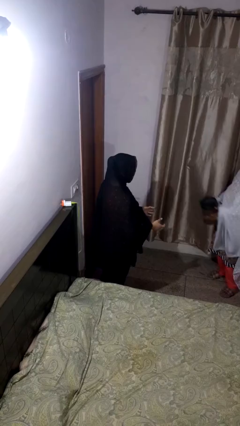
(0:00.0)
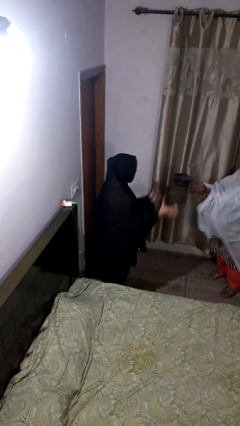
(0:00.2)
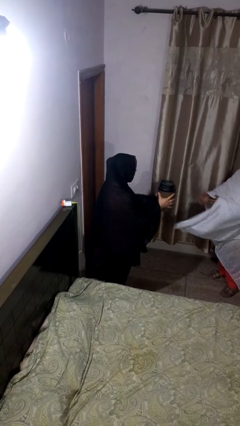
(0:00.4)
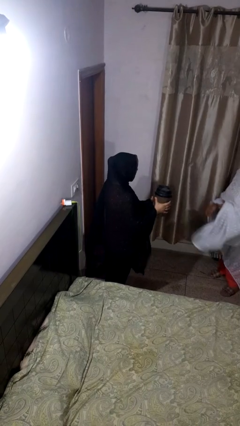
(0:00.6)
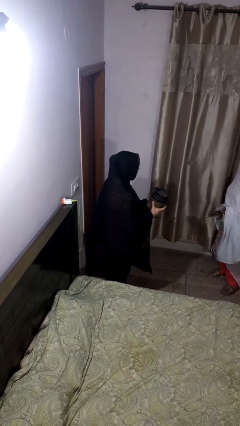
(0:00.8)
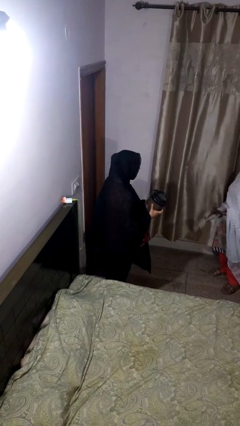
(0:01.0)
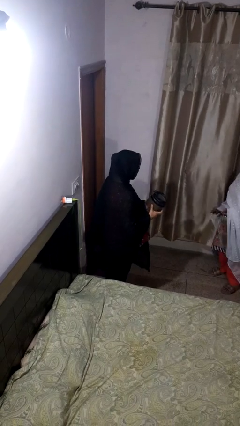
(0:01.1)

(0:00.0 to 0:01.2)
person catches object from person

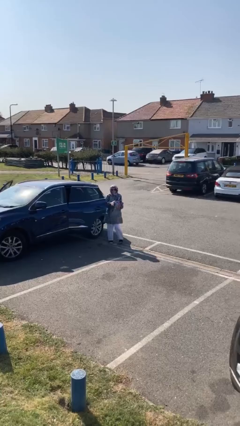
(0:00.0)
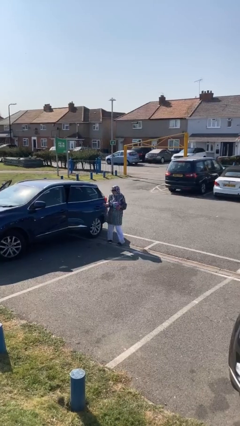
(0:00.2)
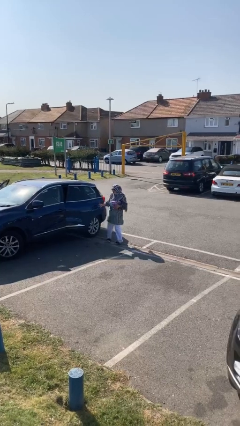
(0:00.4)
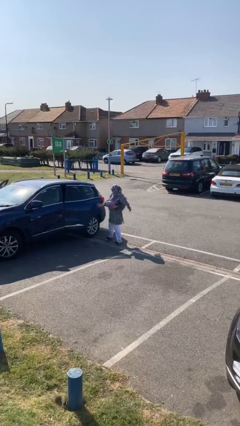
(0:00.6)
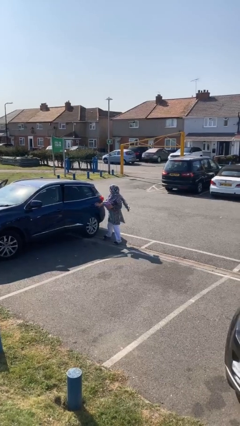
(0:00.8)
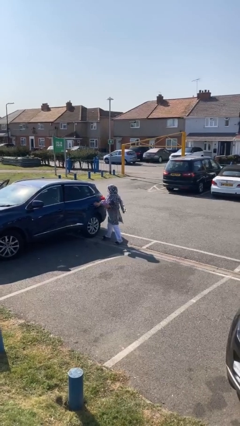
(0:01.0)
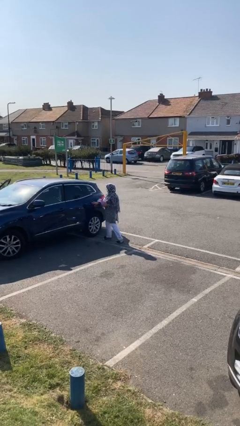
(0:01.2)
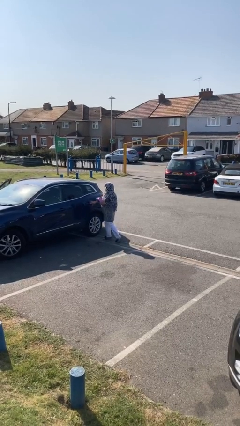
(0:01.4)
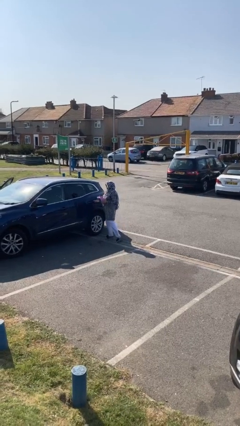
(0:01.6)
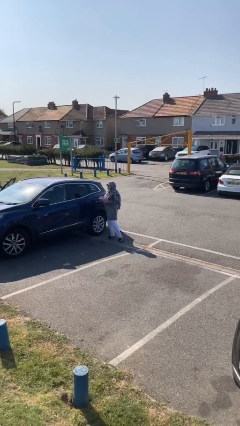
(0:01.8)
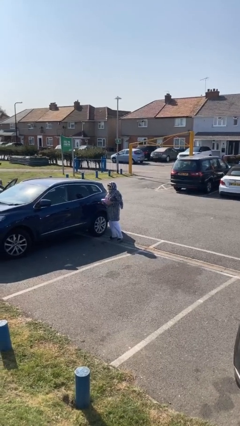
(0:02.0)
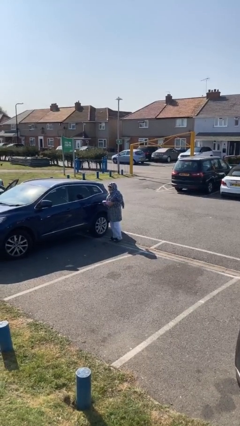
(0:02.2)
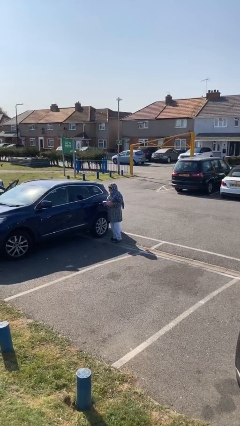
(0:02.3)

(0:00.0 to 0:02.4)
person closes car door

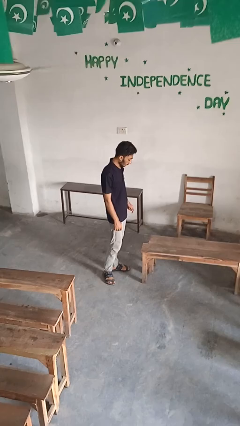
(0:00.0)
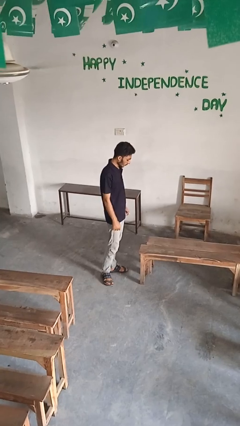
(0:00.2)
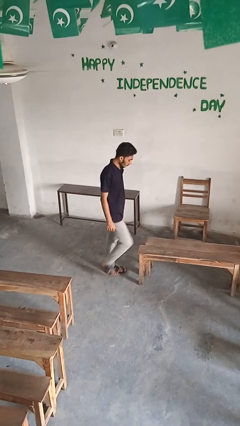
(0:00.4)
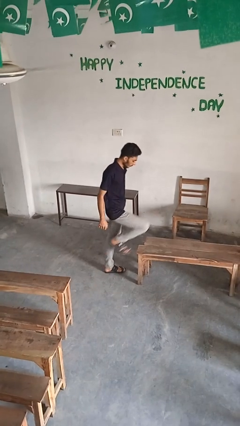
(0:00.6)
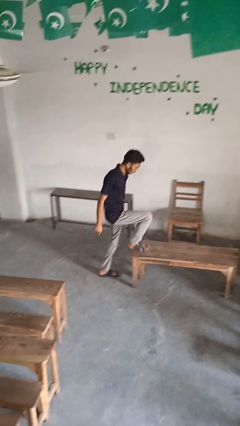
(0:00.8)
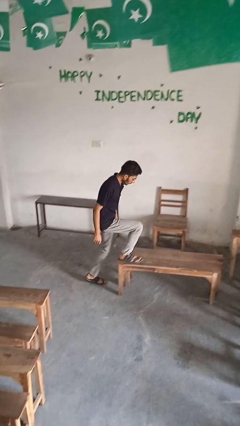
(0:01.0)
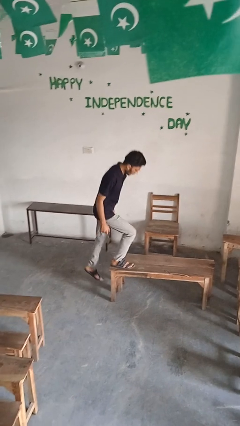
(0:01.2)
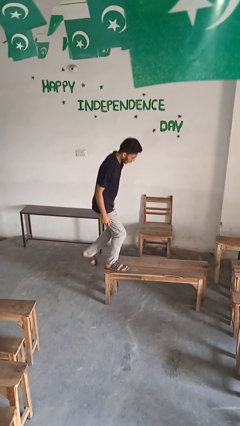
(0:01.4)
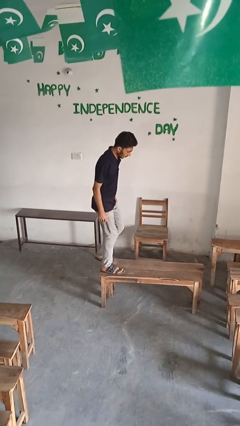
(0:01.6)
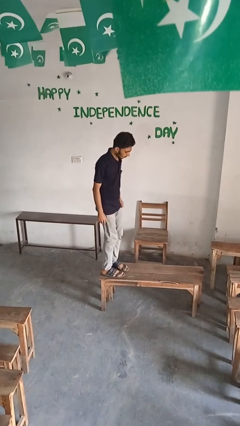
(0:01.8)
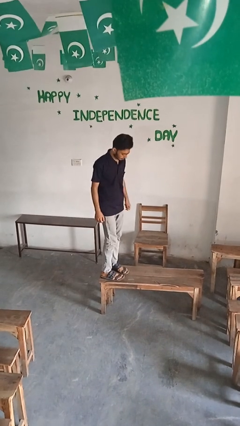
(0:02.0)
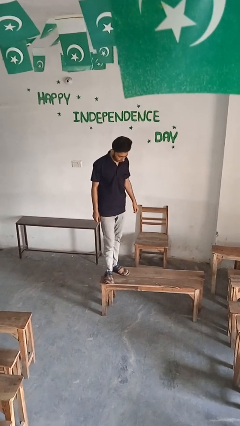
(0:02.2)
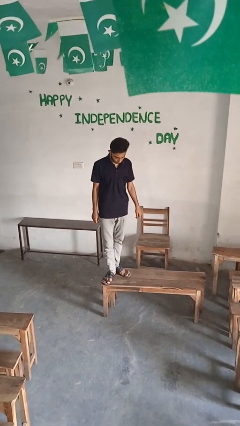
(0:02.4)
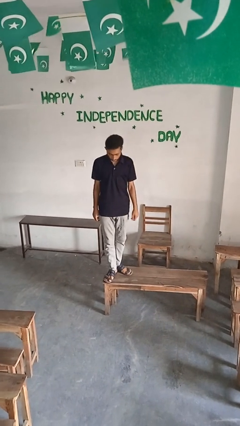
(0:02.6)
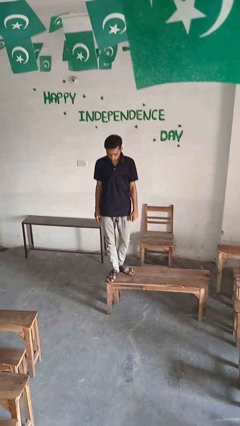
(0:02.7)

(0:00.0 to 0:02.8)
person climbs on table

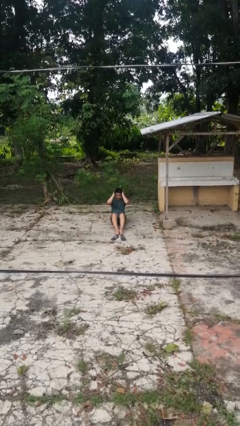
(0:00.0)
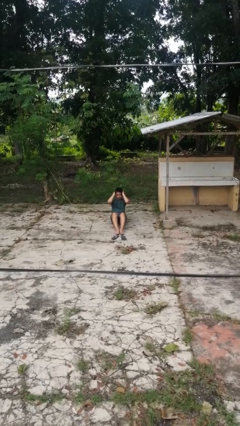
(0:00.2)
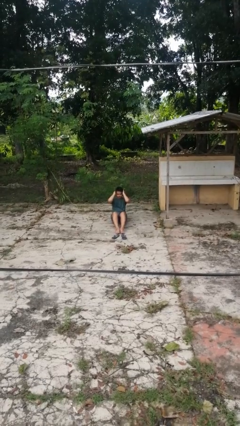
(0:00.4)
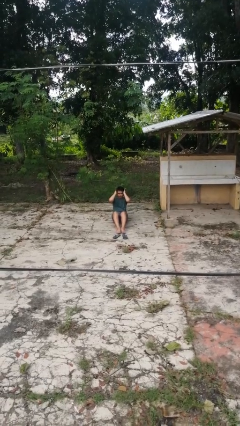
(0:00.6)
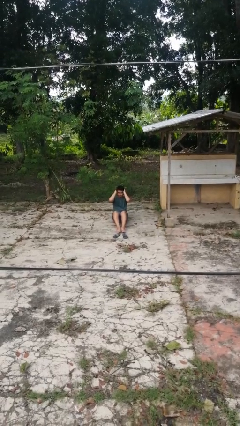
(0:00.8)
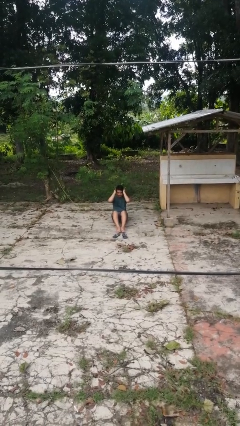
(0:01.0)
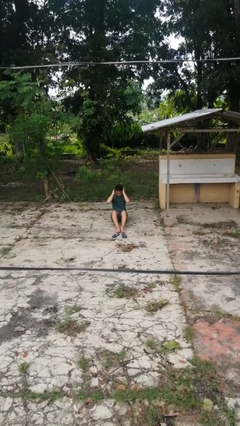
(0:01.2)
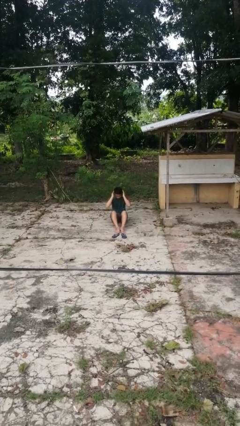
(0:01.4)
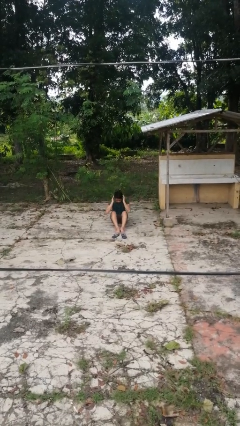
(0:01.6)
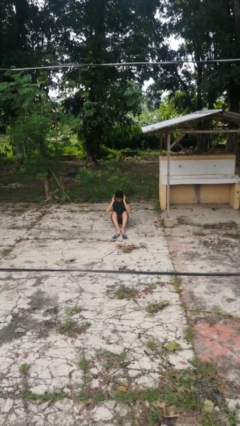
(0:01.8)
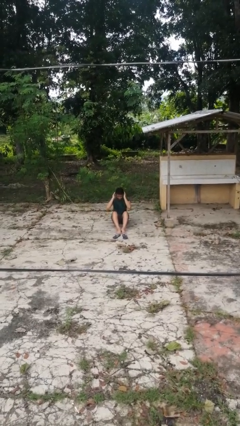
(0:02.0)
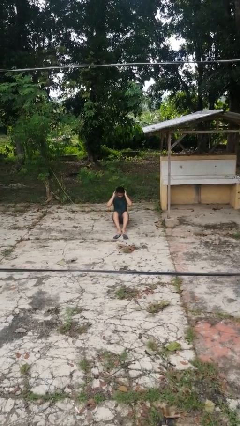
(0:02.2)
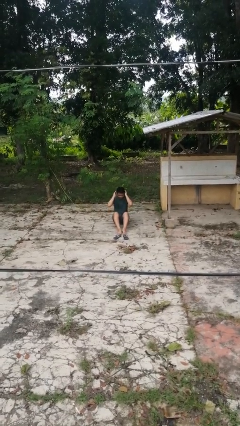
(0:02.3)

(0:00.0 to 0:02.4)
person exercises with situp

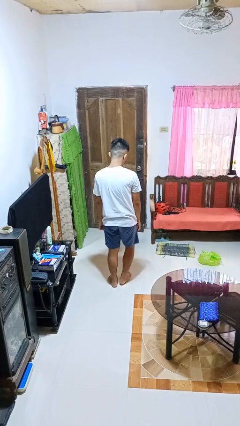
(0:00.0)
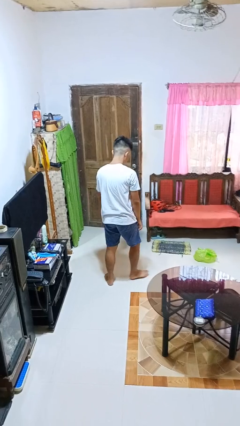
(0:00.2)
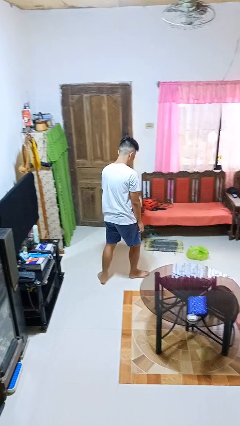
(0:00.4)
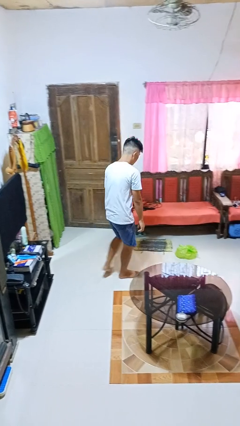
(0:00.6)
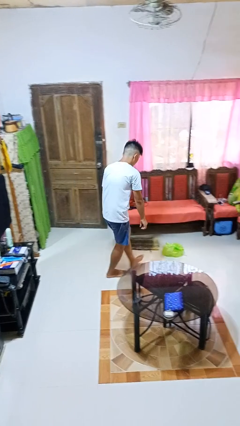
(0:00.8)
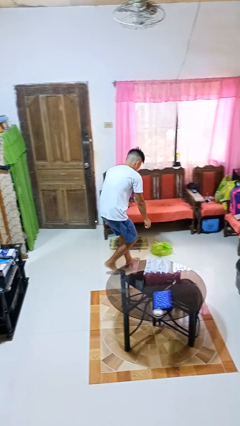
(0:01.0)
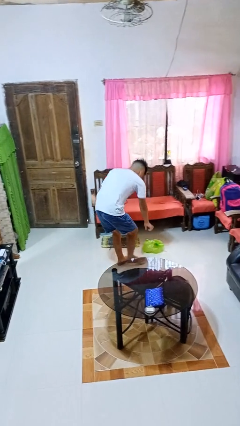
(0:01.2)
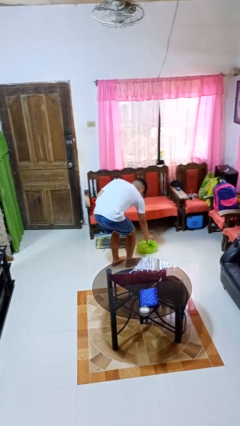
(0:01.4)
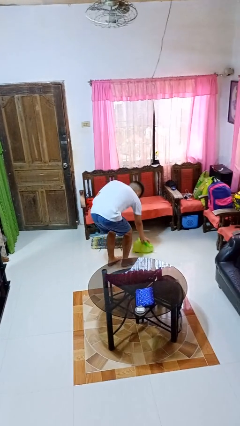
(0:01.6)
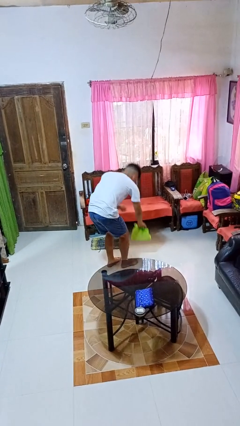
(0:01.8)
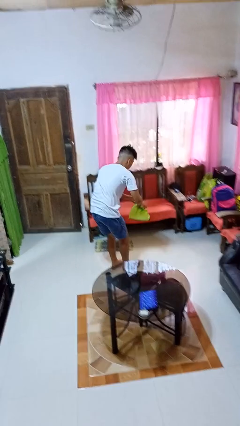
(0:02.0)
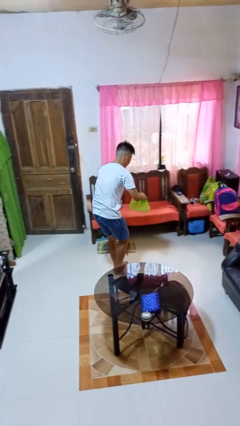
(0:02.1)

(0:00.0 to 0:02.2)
person picks up object from floor

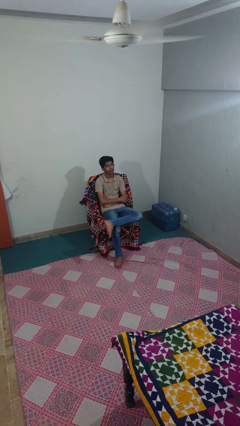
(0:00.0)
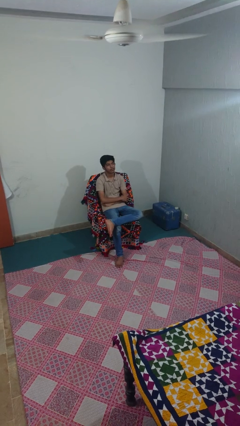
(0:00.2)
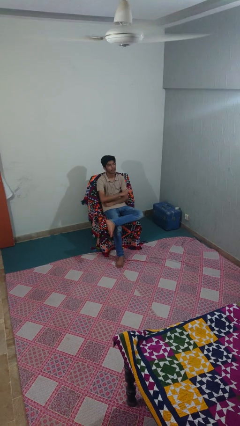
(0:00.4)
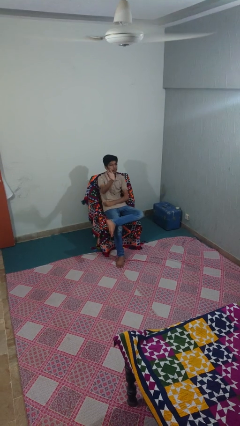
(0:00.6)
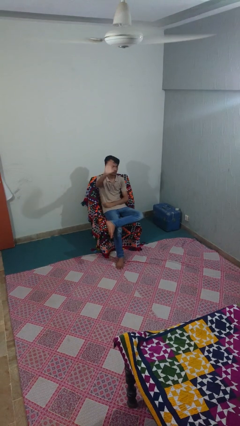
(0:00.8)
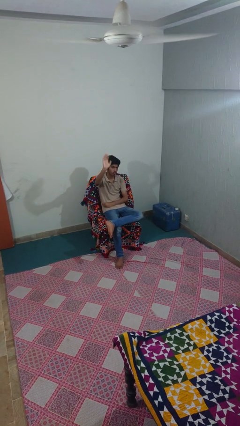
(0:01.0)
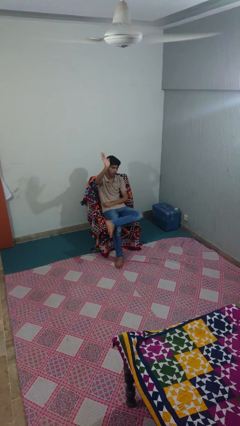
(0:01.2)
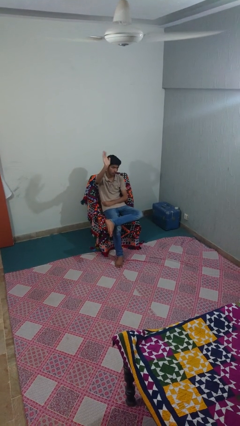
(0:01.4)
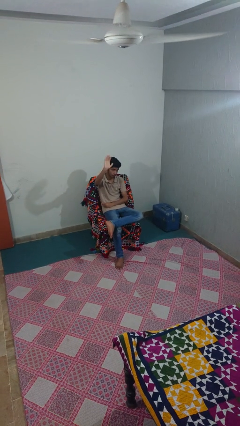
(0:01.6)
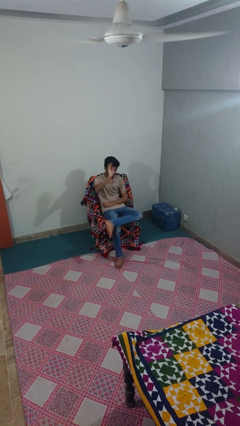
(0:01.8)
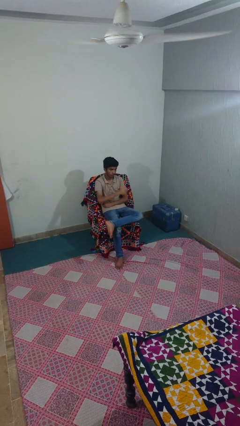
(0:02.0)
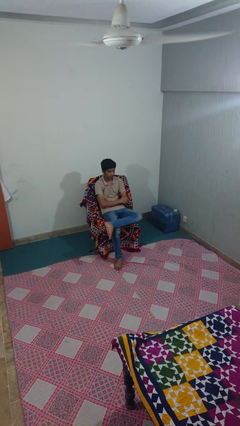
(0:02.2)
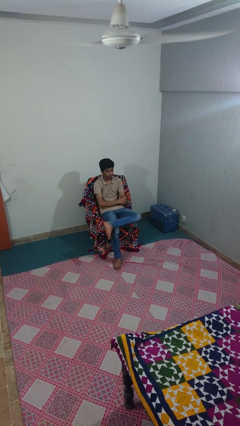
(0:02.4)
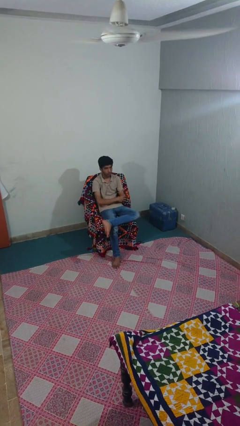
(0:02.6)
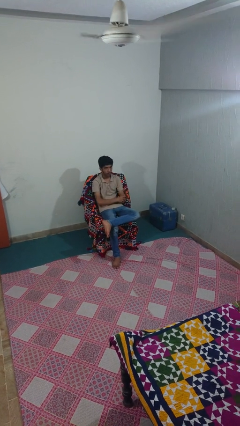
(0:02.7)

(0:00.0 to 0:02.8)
person waves at person

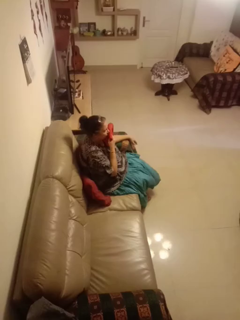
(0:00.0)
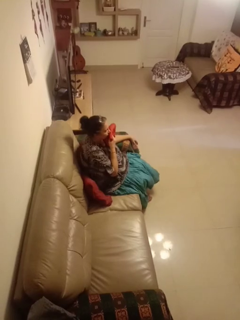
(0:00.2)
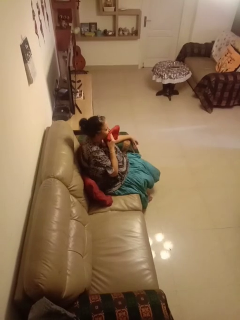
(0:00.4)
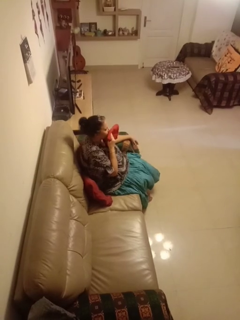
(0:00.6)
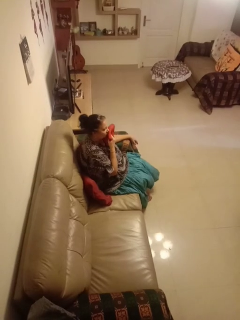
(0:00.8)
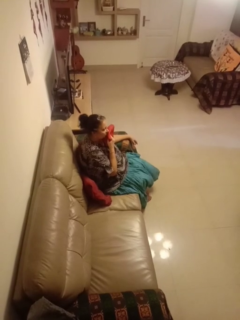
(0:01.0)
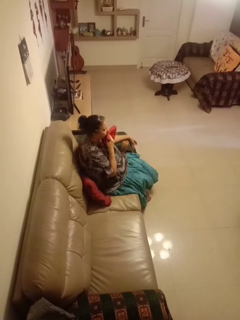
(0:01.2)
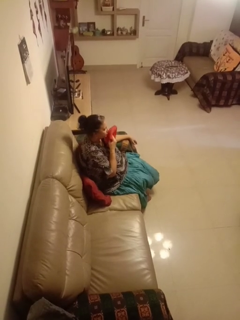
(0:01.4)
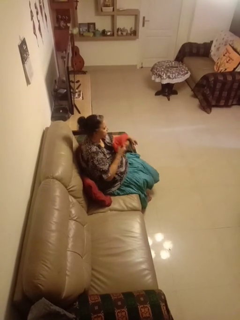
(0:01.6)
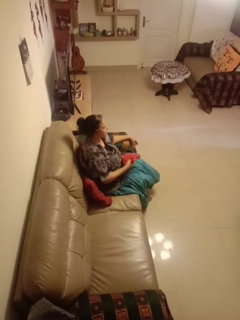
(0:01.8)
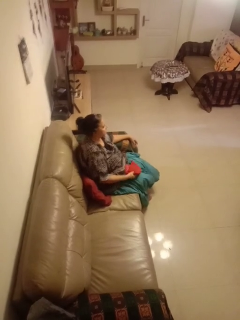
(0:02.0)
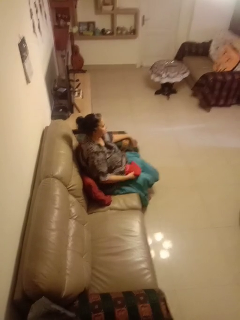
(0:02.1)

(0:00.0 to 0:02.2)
person wipes mouth with napkin

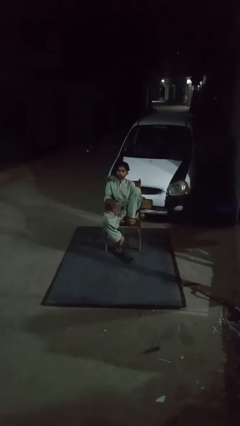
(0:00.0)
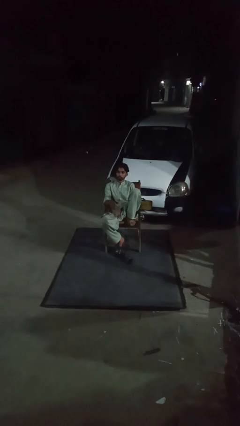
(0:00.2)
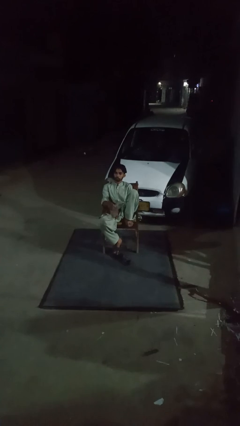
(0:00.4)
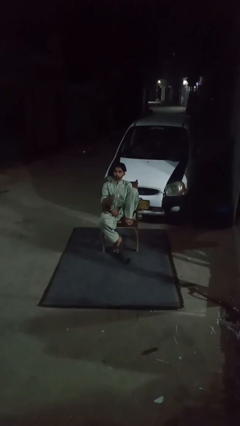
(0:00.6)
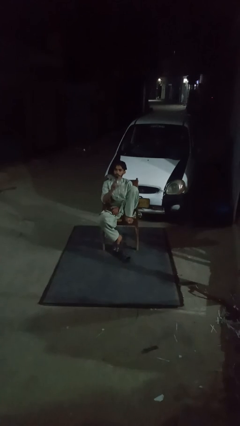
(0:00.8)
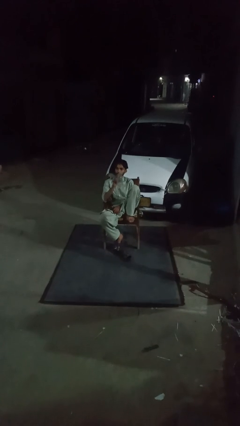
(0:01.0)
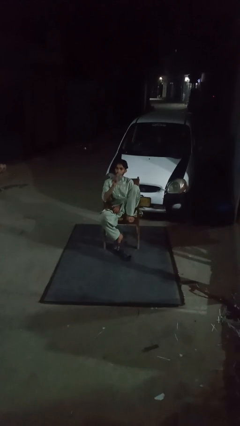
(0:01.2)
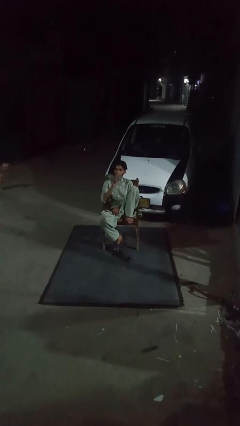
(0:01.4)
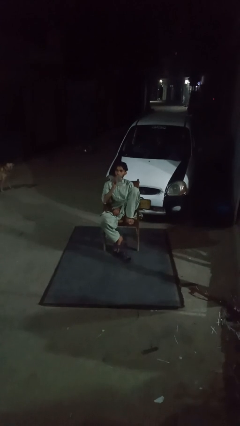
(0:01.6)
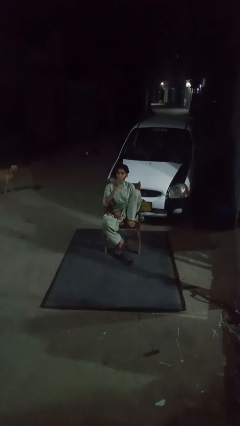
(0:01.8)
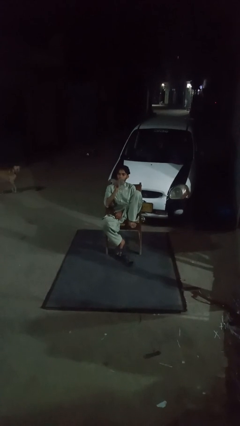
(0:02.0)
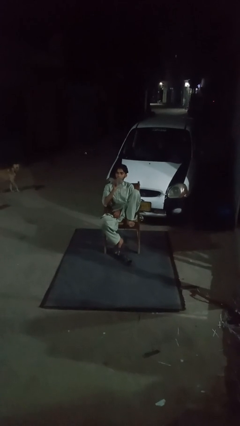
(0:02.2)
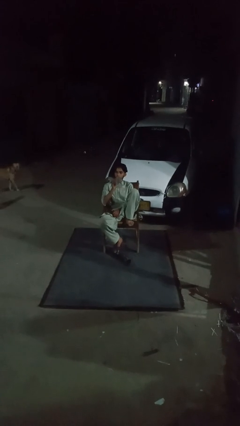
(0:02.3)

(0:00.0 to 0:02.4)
person drinks from bottle
